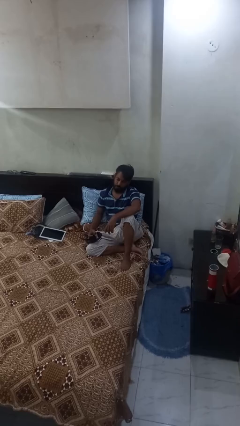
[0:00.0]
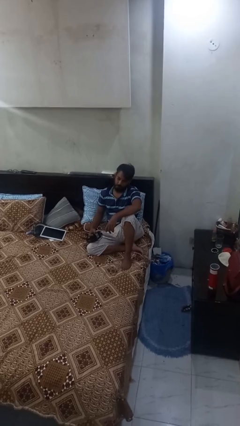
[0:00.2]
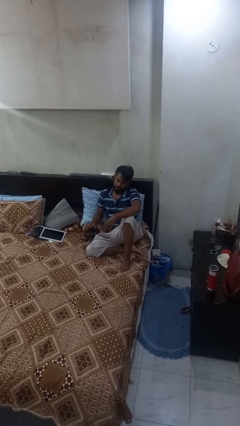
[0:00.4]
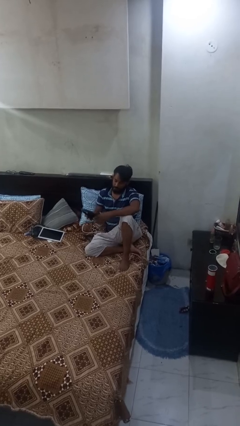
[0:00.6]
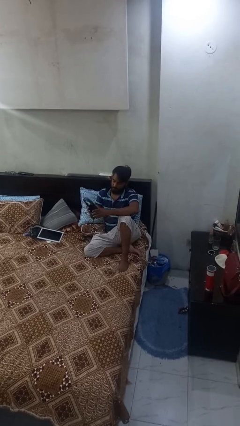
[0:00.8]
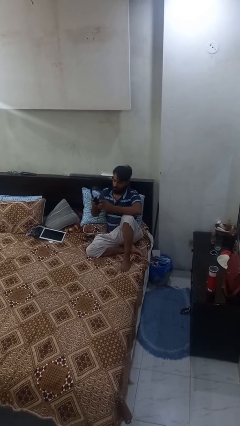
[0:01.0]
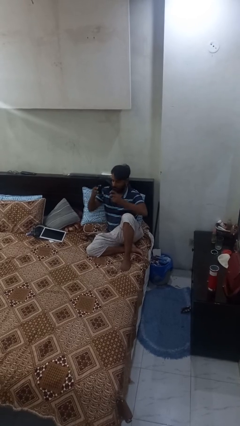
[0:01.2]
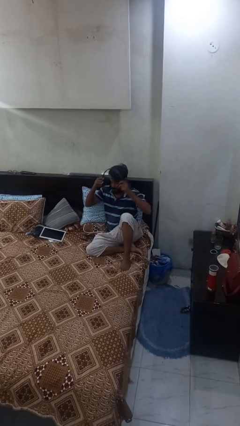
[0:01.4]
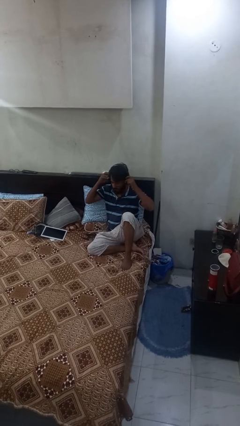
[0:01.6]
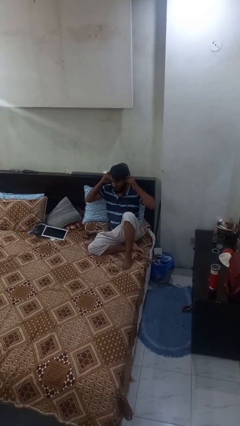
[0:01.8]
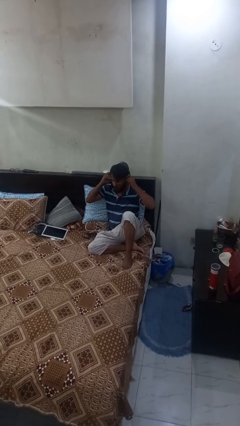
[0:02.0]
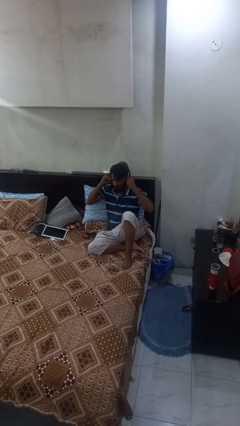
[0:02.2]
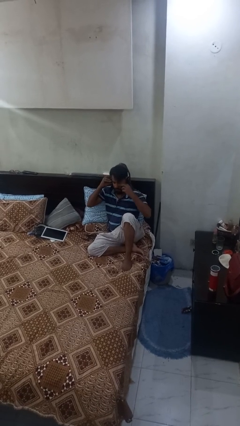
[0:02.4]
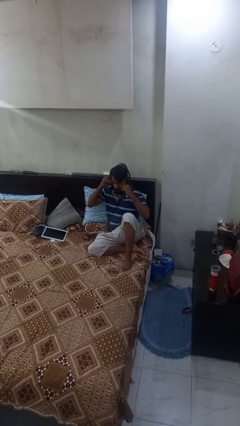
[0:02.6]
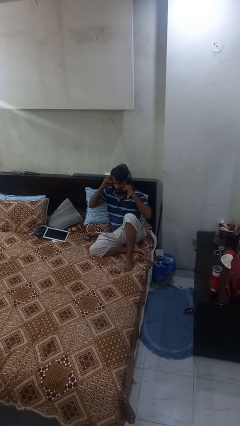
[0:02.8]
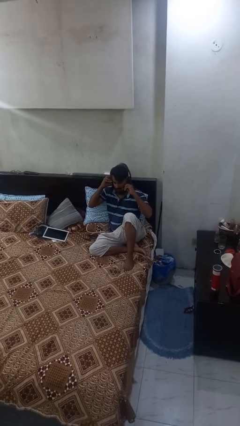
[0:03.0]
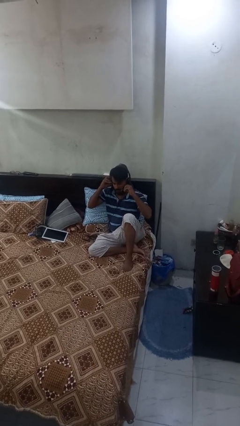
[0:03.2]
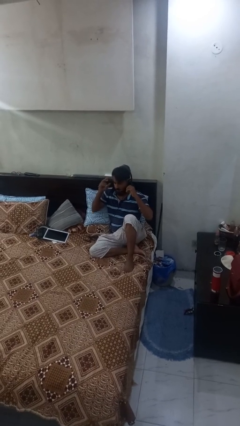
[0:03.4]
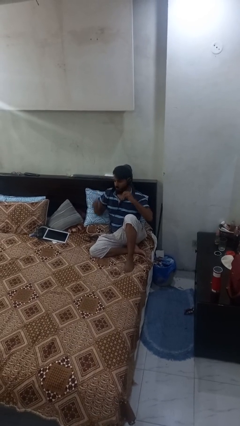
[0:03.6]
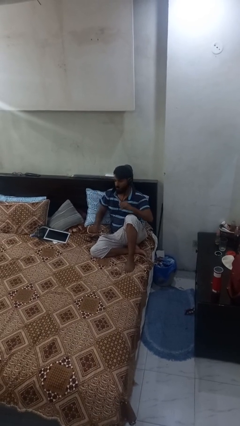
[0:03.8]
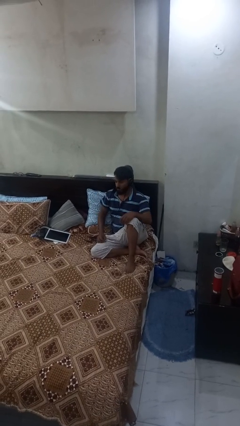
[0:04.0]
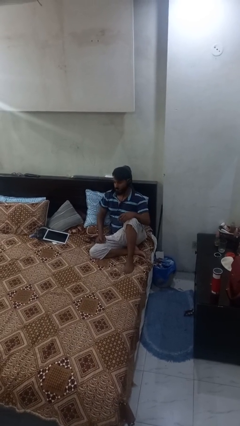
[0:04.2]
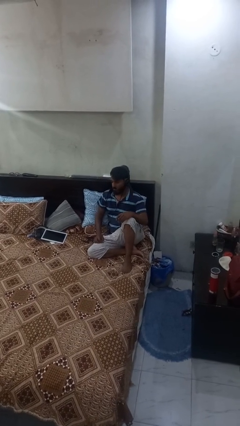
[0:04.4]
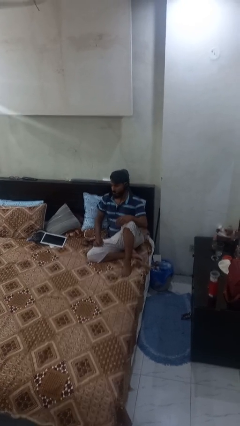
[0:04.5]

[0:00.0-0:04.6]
person puts on headphones

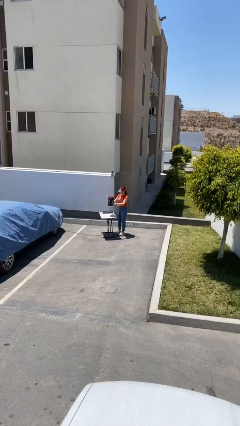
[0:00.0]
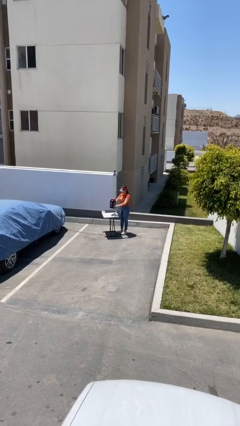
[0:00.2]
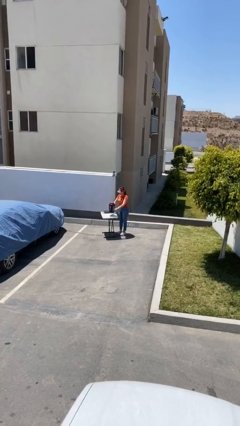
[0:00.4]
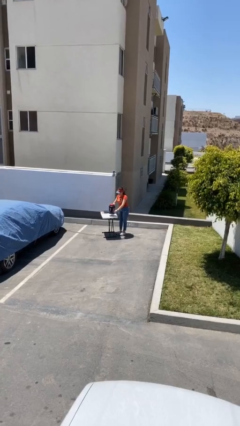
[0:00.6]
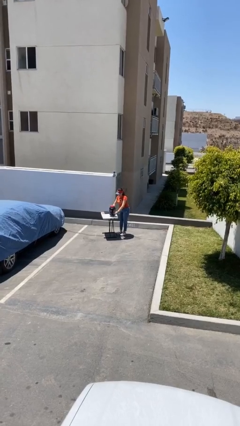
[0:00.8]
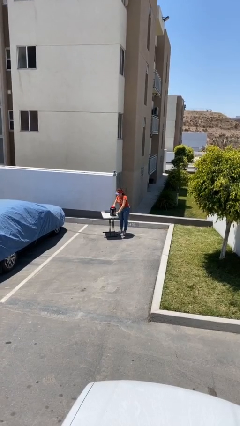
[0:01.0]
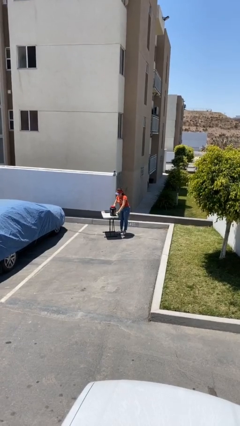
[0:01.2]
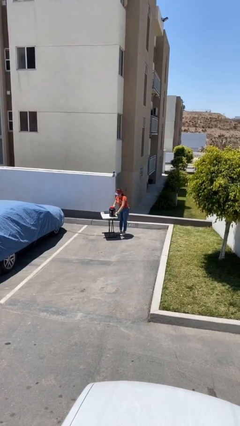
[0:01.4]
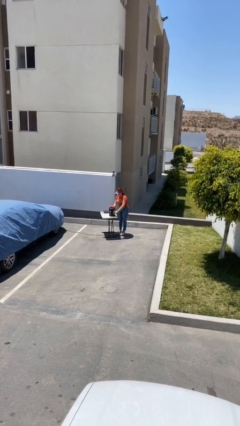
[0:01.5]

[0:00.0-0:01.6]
person puts down object on table

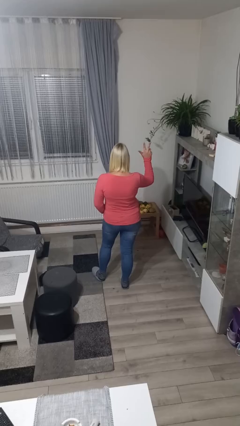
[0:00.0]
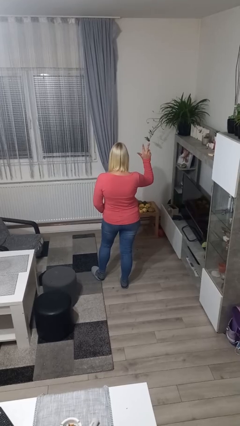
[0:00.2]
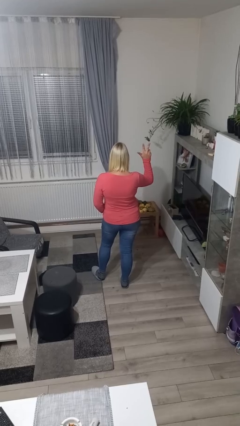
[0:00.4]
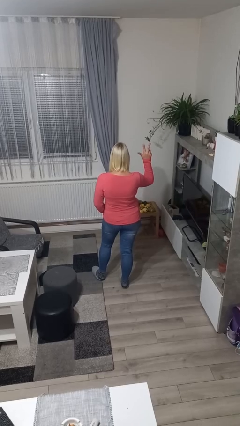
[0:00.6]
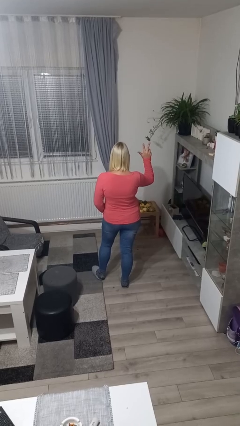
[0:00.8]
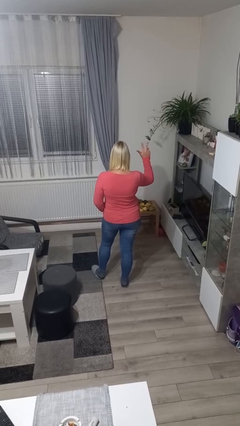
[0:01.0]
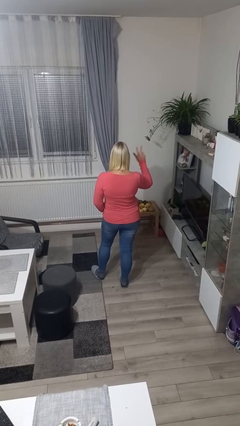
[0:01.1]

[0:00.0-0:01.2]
person gestures number three

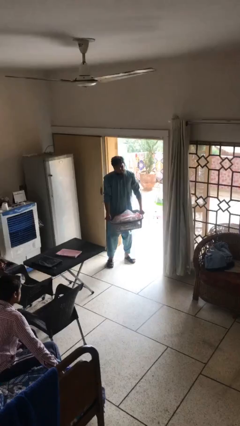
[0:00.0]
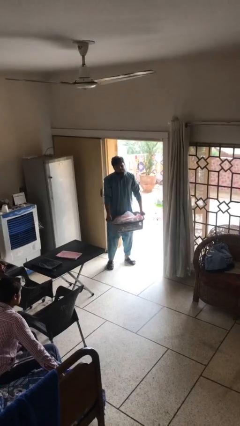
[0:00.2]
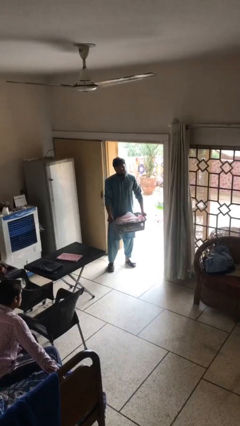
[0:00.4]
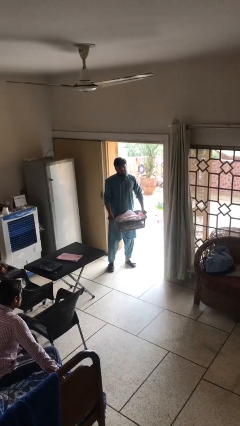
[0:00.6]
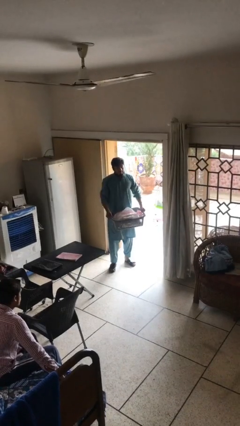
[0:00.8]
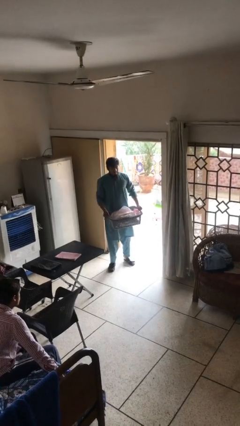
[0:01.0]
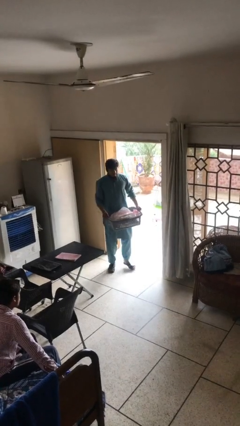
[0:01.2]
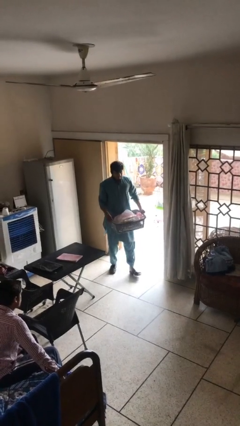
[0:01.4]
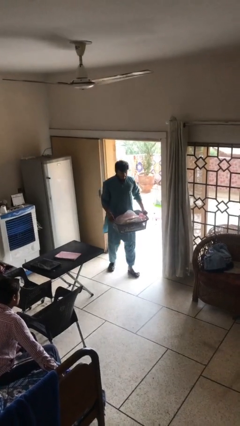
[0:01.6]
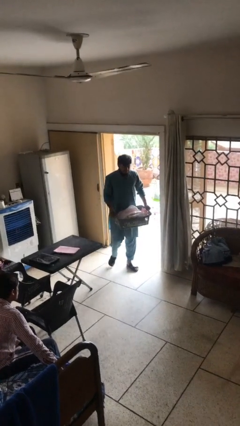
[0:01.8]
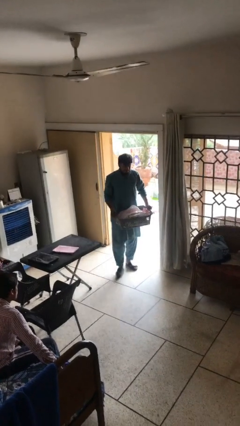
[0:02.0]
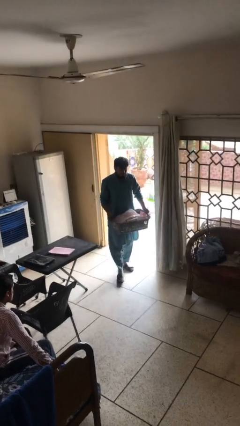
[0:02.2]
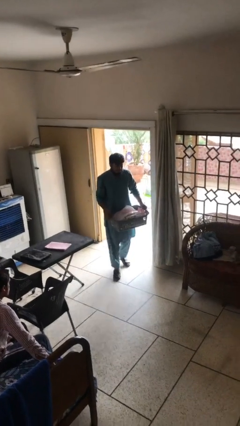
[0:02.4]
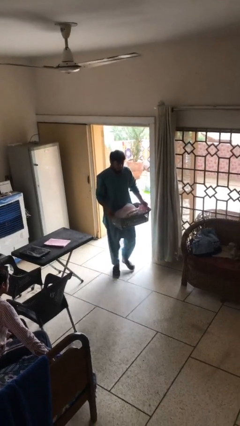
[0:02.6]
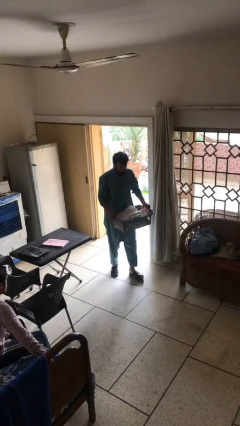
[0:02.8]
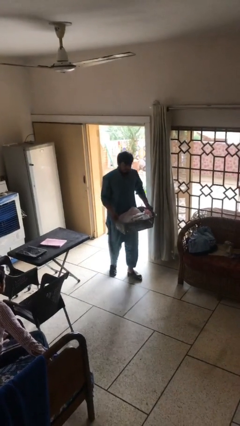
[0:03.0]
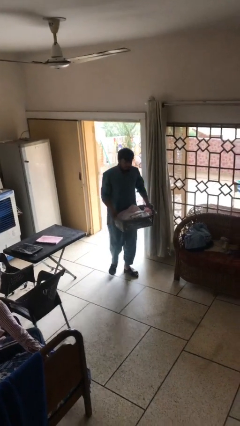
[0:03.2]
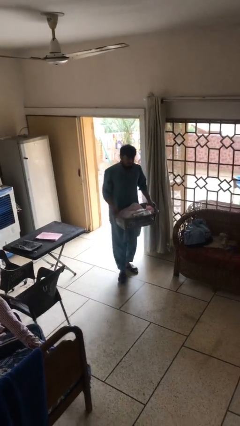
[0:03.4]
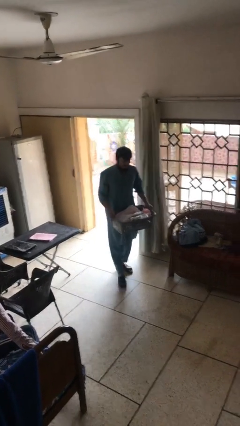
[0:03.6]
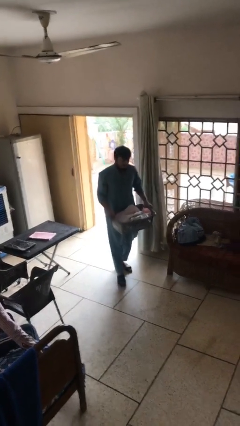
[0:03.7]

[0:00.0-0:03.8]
person carries heavy object

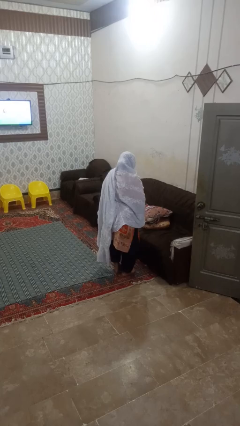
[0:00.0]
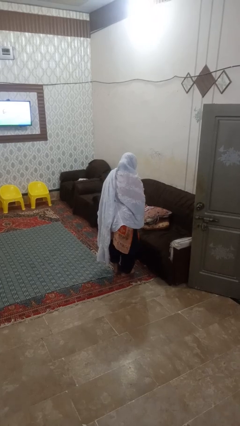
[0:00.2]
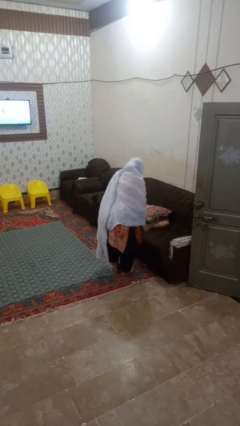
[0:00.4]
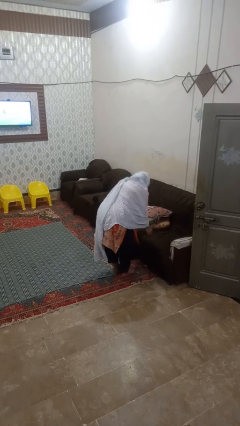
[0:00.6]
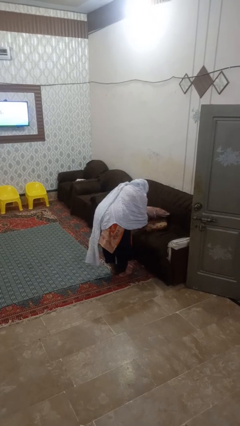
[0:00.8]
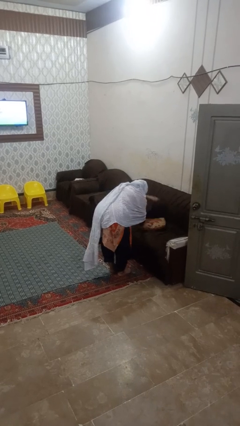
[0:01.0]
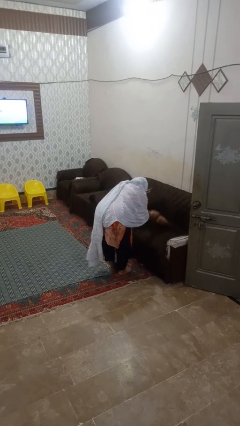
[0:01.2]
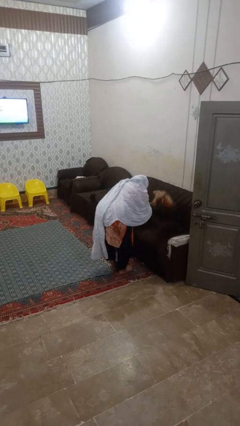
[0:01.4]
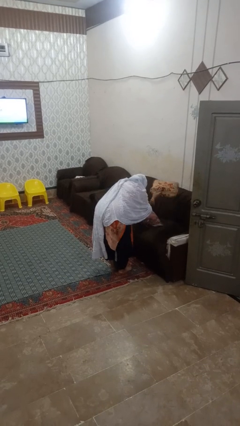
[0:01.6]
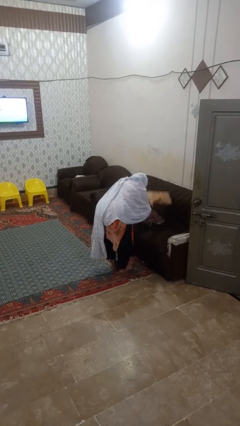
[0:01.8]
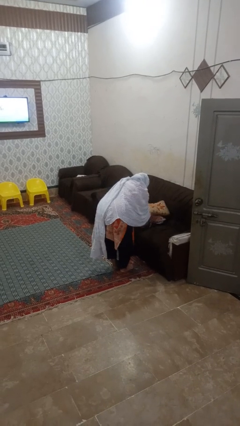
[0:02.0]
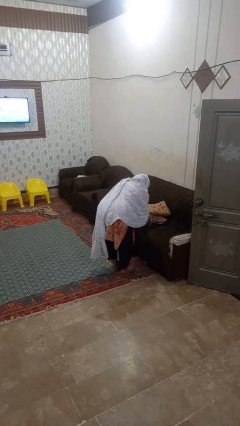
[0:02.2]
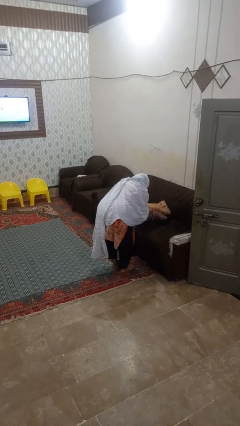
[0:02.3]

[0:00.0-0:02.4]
person searches in couch

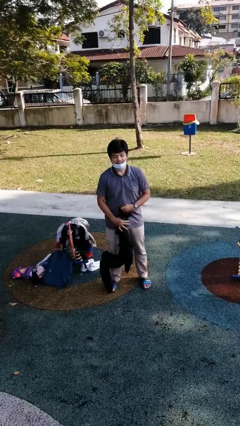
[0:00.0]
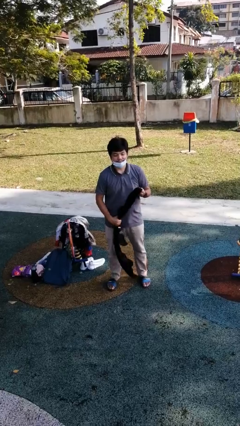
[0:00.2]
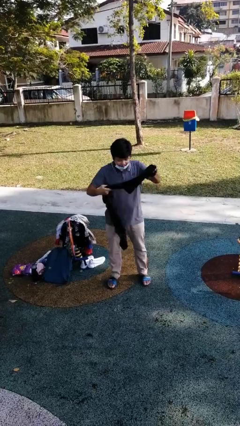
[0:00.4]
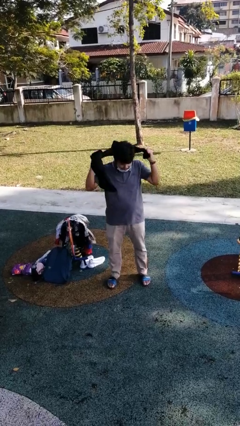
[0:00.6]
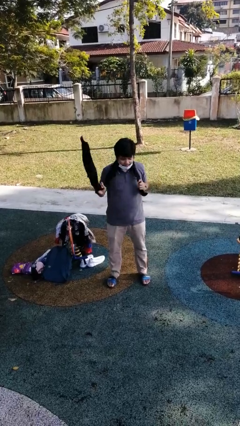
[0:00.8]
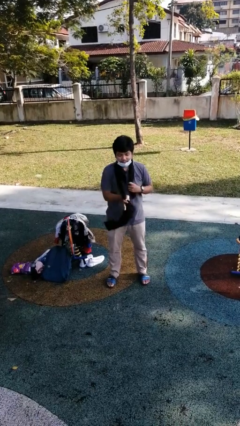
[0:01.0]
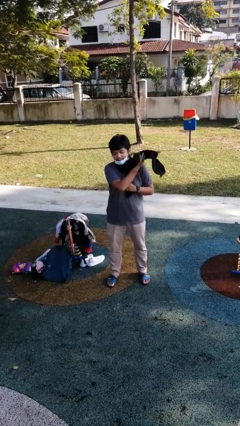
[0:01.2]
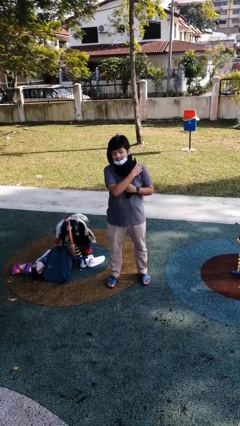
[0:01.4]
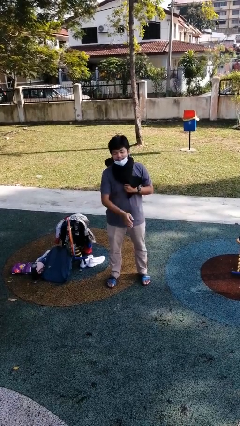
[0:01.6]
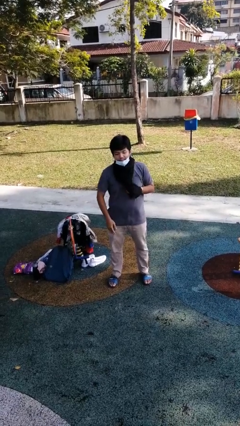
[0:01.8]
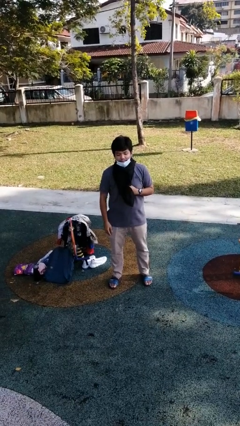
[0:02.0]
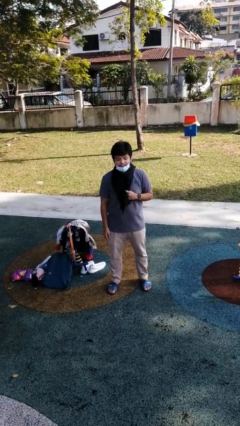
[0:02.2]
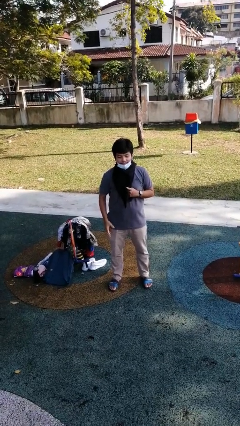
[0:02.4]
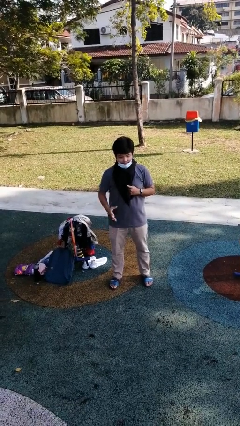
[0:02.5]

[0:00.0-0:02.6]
person puts on scarf

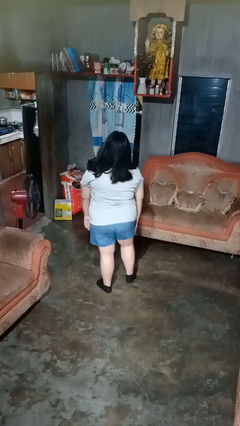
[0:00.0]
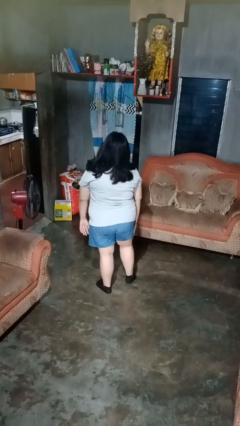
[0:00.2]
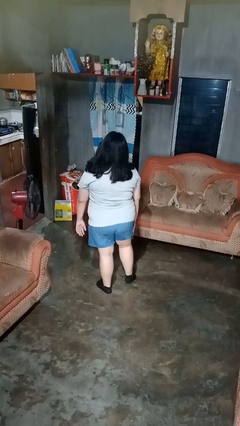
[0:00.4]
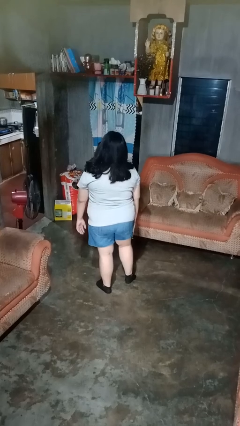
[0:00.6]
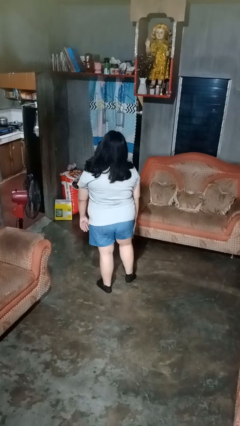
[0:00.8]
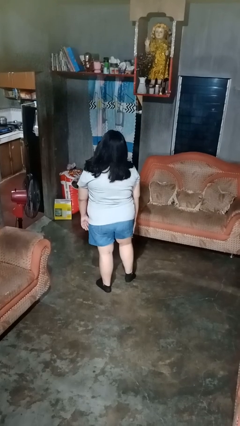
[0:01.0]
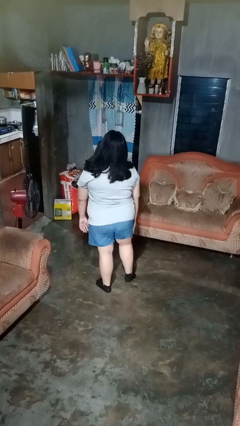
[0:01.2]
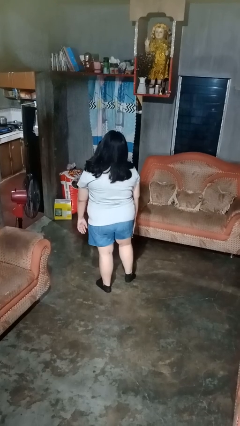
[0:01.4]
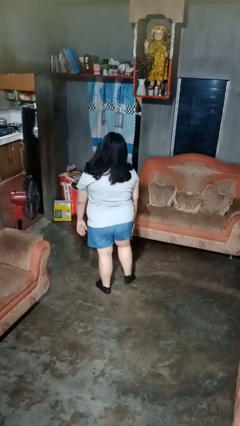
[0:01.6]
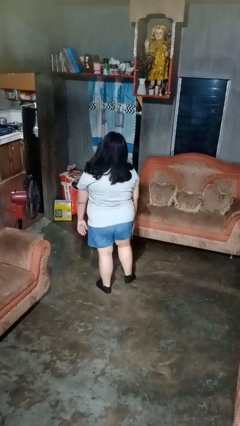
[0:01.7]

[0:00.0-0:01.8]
person swats bug
